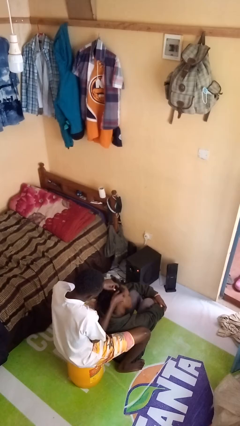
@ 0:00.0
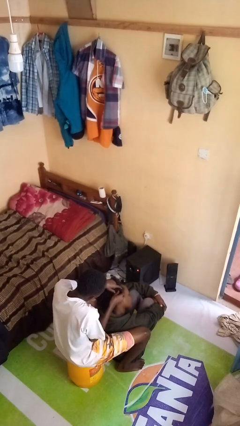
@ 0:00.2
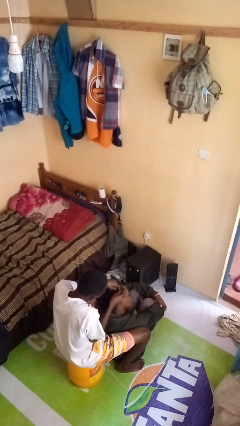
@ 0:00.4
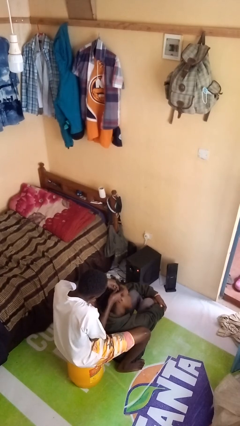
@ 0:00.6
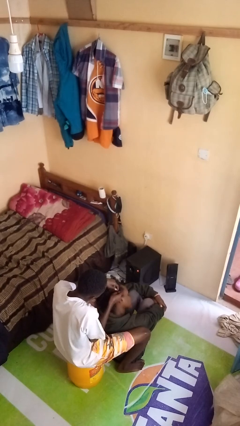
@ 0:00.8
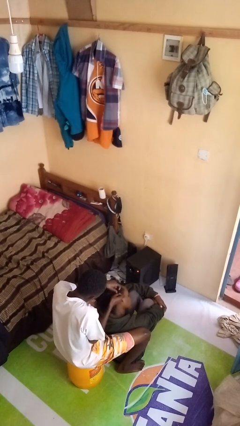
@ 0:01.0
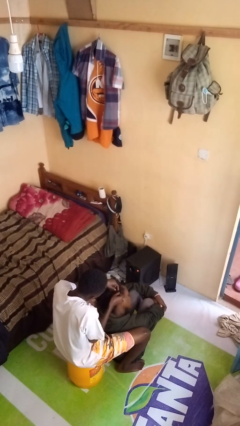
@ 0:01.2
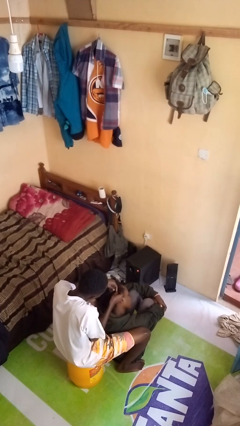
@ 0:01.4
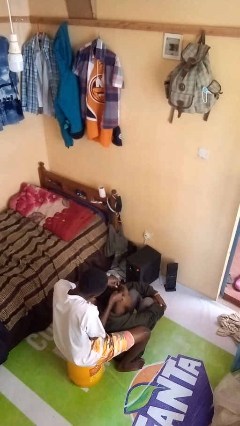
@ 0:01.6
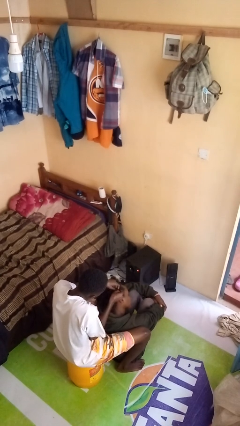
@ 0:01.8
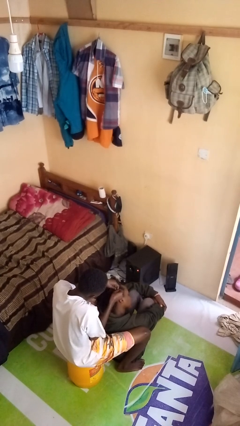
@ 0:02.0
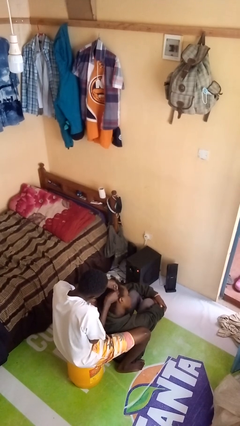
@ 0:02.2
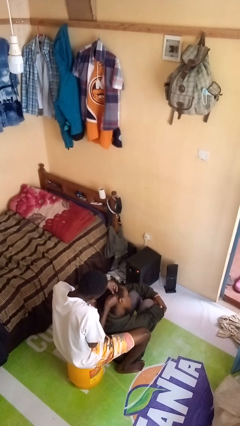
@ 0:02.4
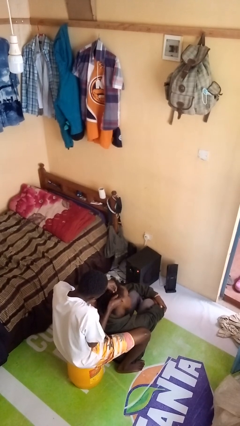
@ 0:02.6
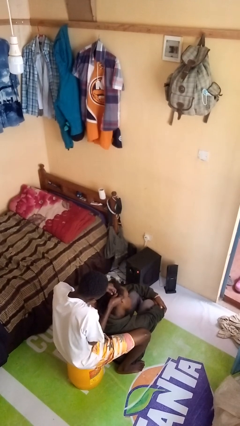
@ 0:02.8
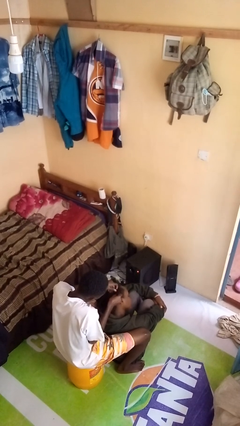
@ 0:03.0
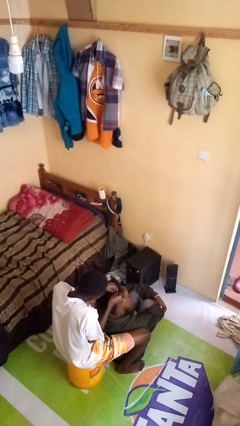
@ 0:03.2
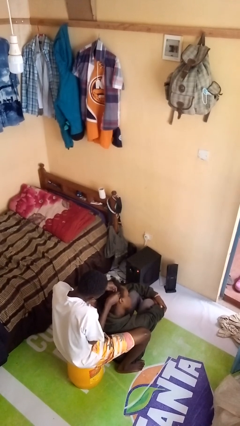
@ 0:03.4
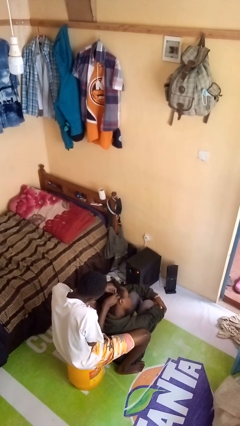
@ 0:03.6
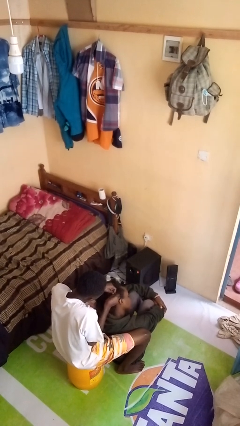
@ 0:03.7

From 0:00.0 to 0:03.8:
person braids hair of person

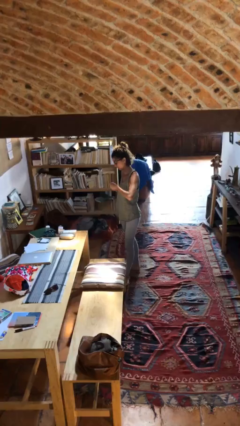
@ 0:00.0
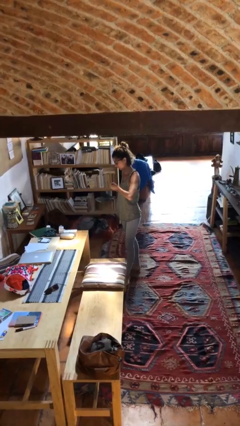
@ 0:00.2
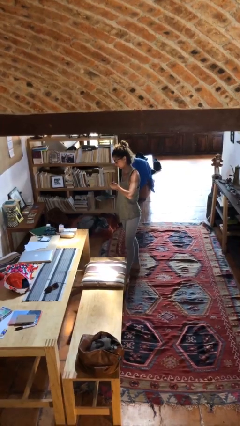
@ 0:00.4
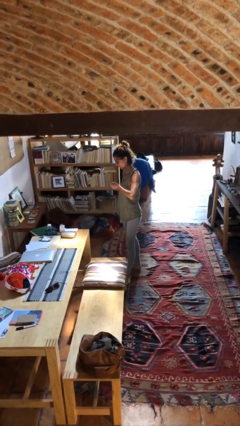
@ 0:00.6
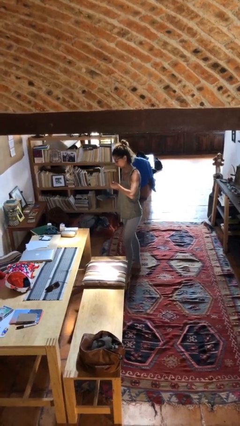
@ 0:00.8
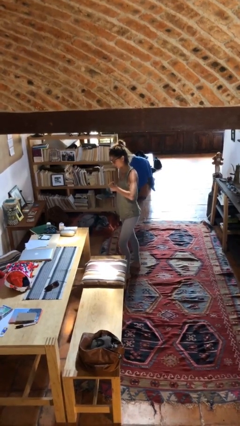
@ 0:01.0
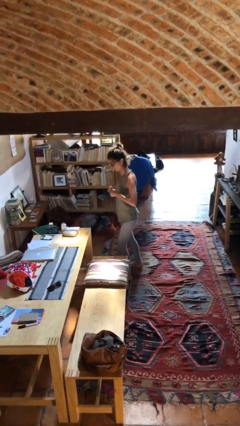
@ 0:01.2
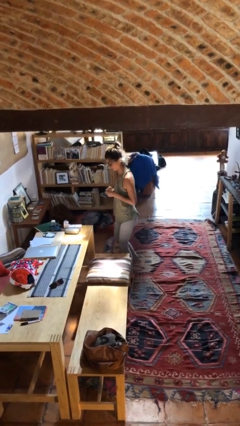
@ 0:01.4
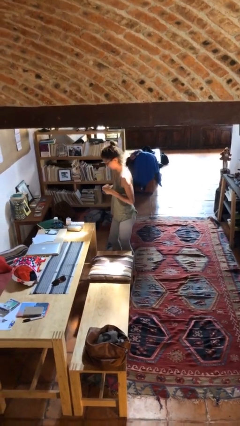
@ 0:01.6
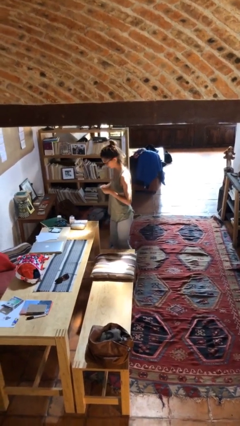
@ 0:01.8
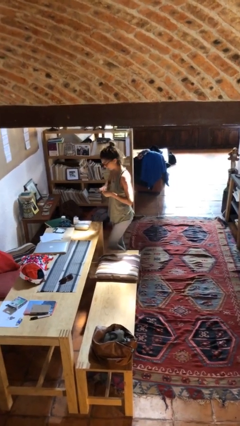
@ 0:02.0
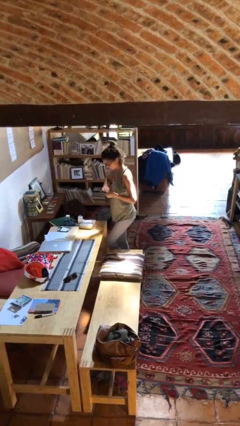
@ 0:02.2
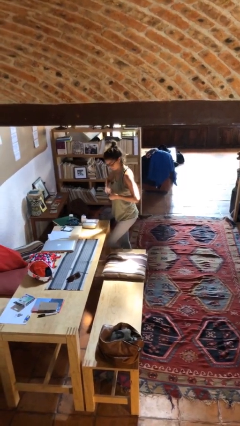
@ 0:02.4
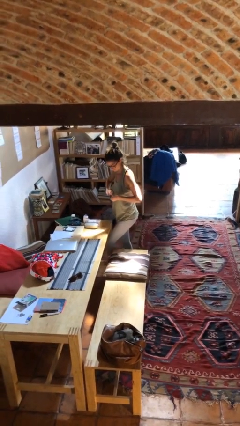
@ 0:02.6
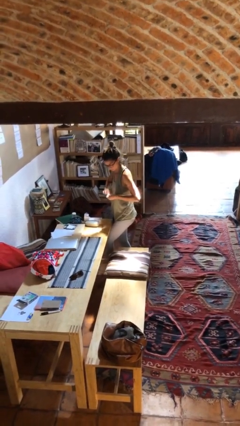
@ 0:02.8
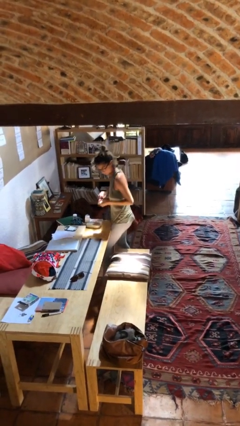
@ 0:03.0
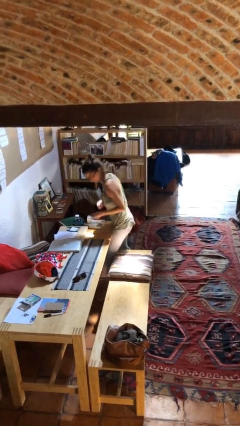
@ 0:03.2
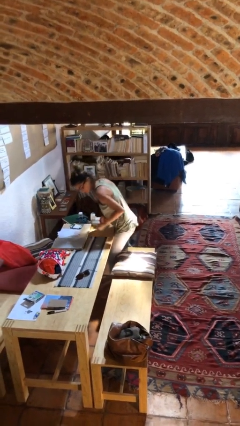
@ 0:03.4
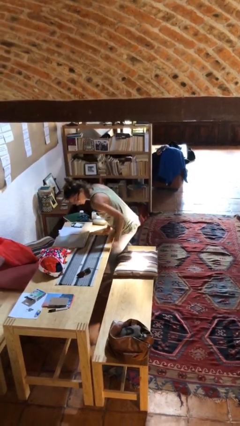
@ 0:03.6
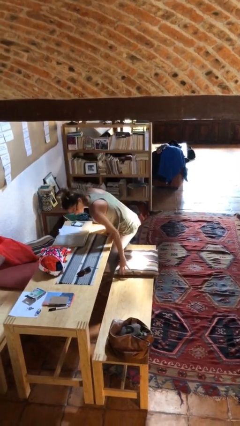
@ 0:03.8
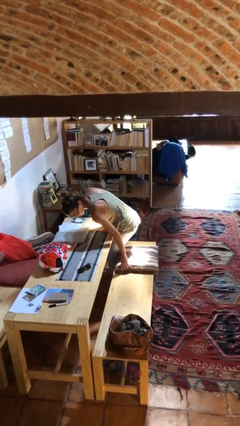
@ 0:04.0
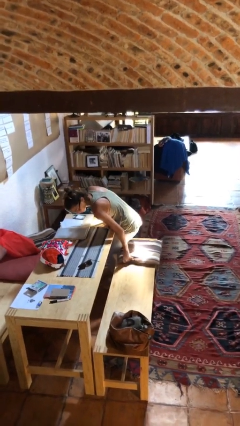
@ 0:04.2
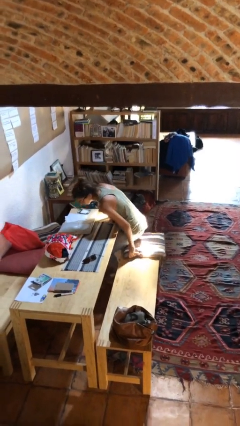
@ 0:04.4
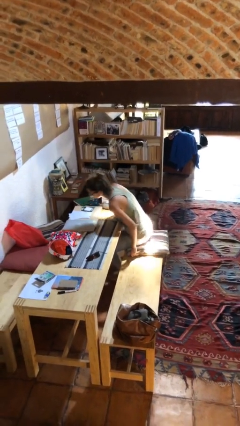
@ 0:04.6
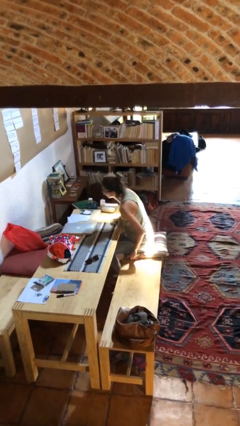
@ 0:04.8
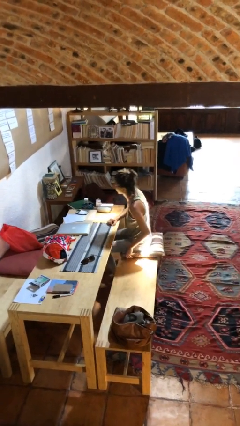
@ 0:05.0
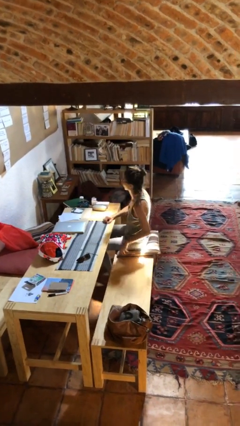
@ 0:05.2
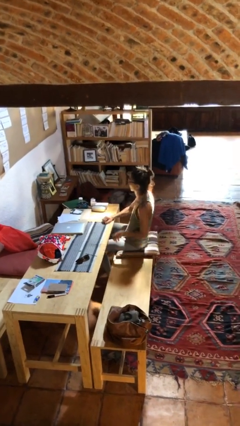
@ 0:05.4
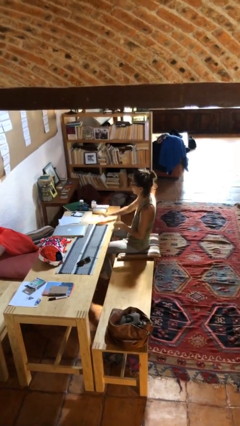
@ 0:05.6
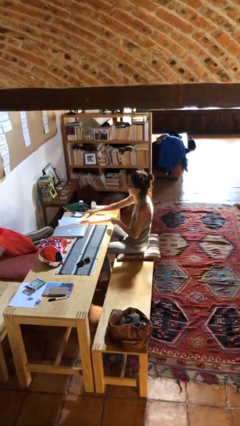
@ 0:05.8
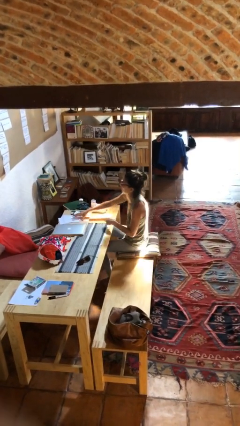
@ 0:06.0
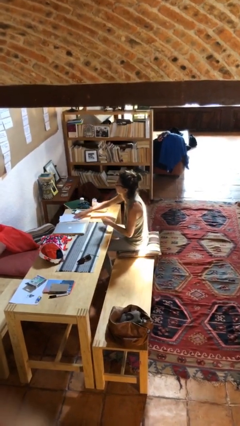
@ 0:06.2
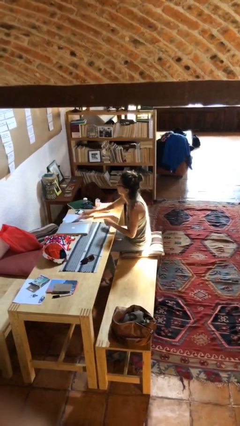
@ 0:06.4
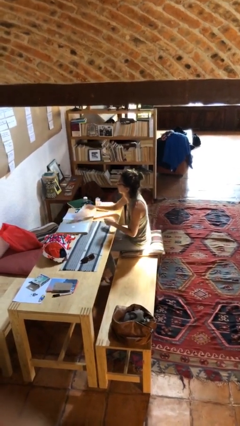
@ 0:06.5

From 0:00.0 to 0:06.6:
person sits down

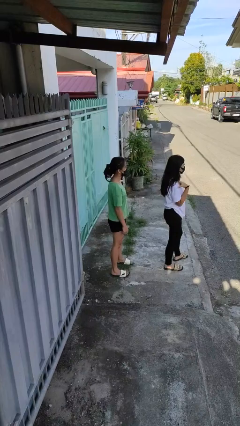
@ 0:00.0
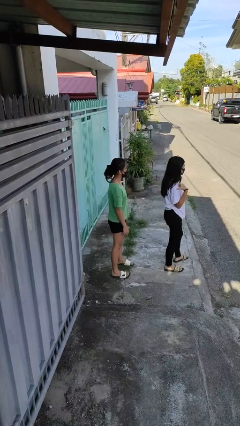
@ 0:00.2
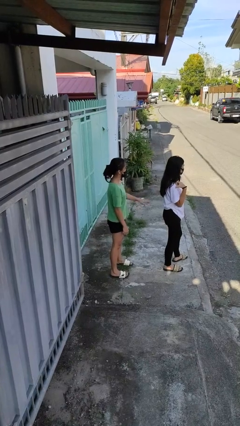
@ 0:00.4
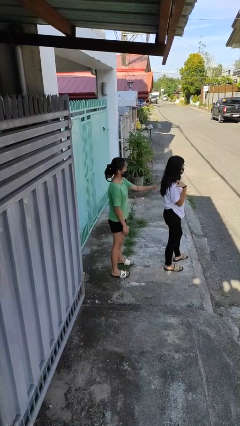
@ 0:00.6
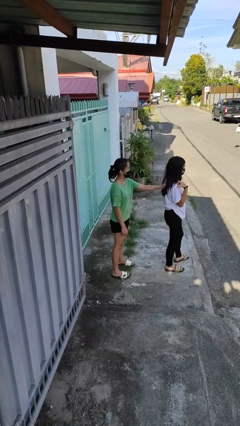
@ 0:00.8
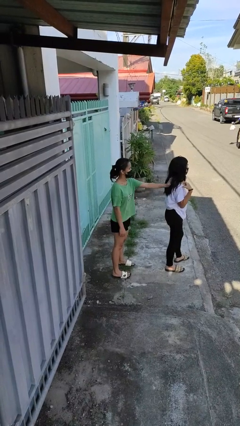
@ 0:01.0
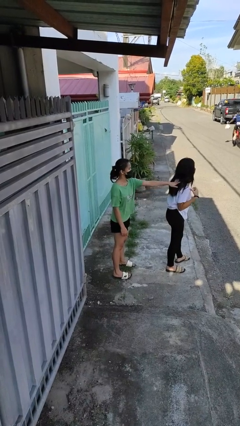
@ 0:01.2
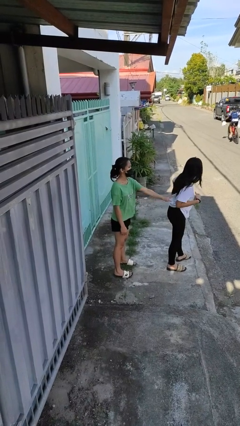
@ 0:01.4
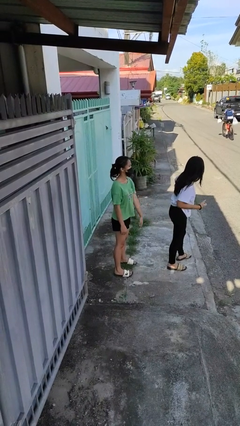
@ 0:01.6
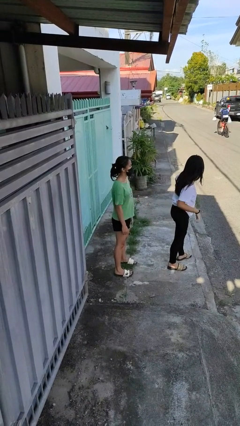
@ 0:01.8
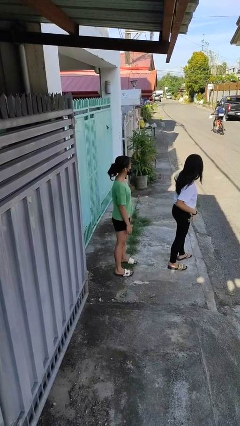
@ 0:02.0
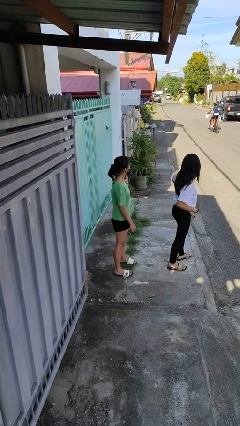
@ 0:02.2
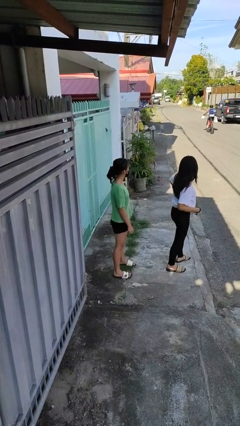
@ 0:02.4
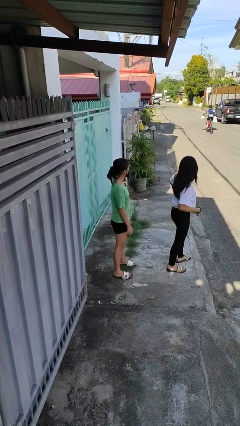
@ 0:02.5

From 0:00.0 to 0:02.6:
person touches back of person

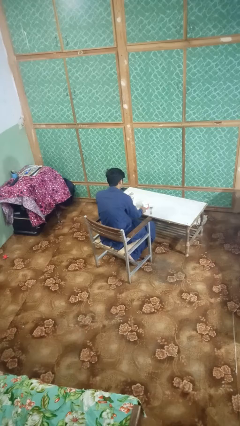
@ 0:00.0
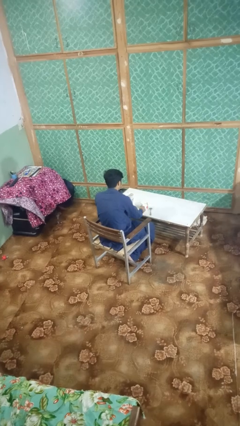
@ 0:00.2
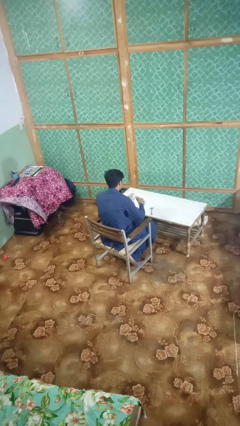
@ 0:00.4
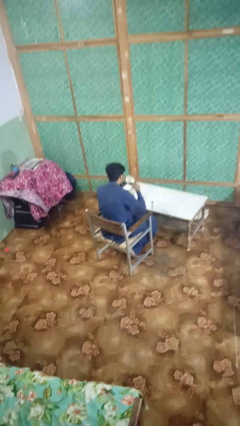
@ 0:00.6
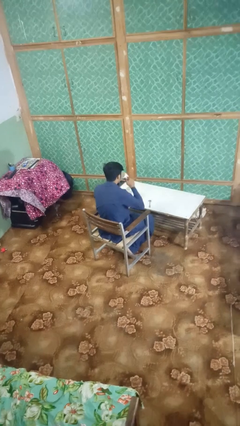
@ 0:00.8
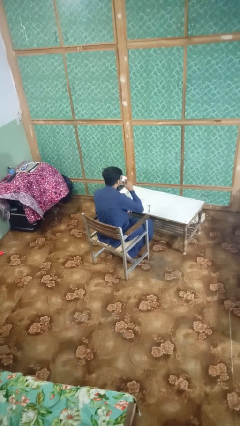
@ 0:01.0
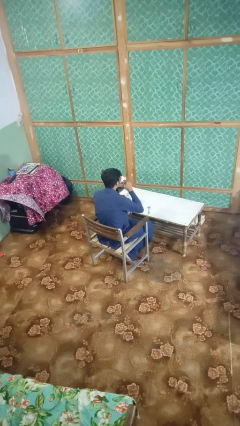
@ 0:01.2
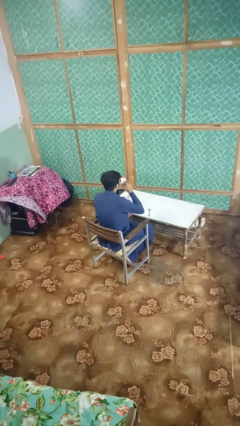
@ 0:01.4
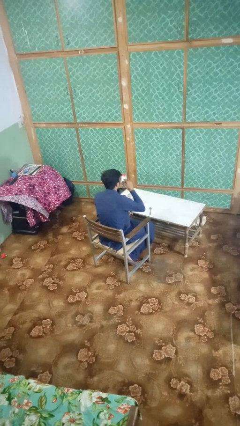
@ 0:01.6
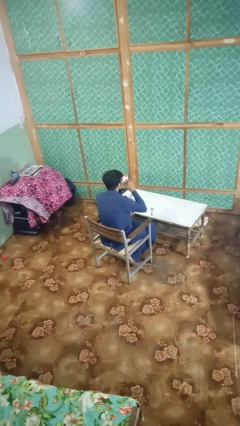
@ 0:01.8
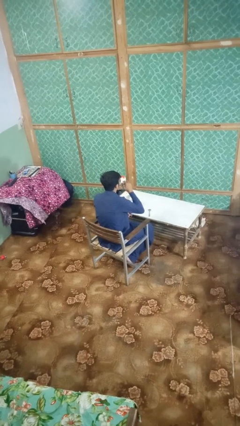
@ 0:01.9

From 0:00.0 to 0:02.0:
person drinks from mug

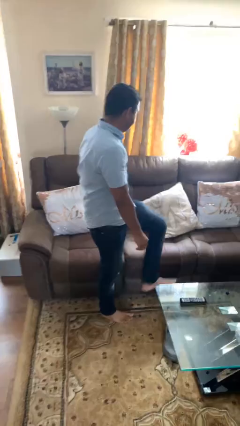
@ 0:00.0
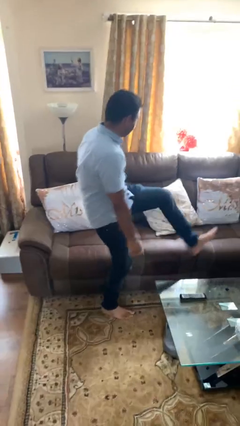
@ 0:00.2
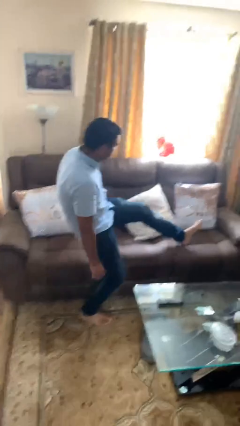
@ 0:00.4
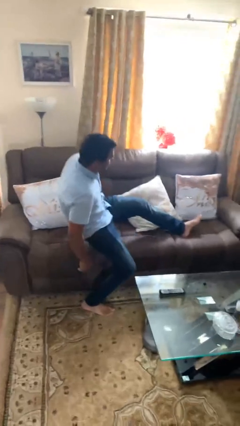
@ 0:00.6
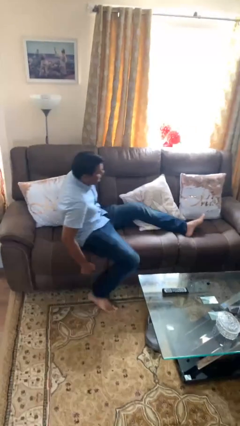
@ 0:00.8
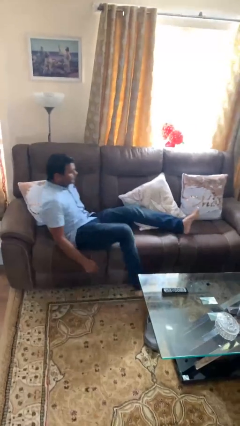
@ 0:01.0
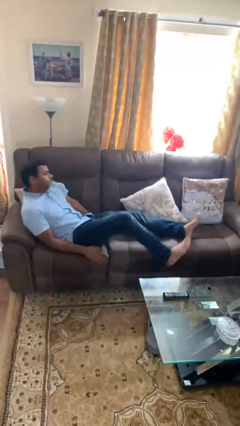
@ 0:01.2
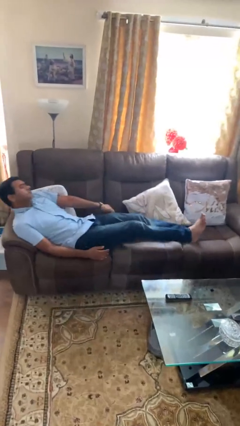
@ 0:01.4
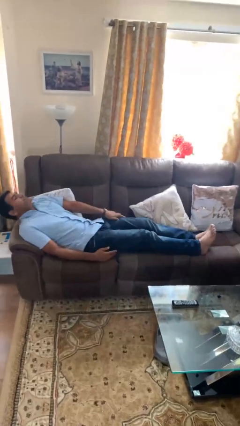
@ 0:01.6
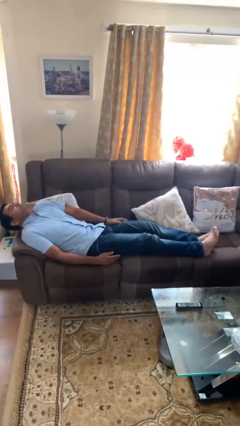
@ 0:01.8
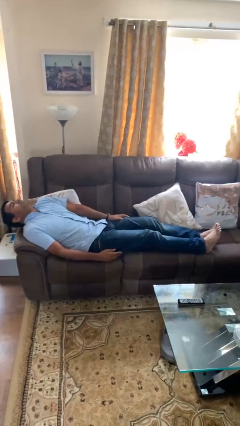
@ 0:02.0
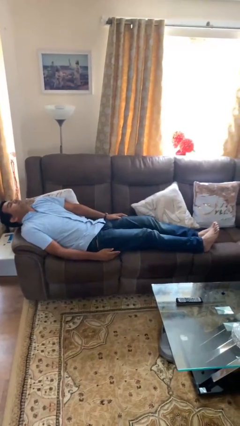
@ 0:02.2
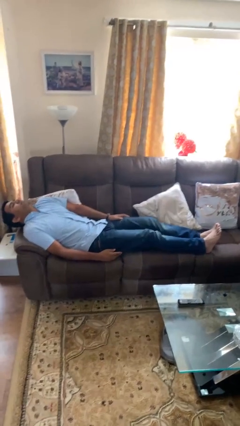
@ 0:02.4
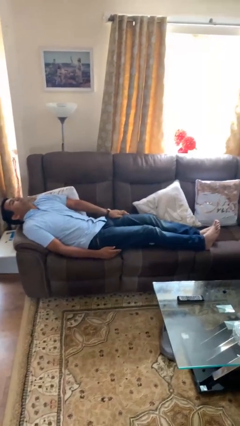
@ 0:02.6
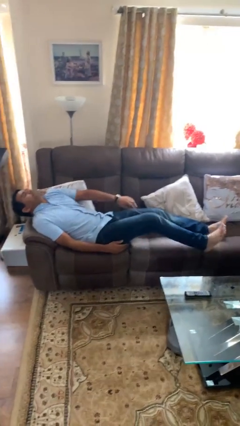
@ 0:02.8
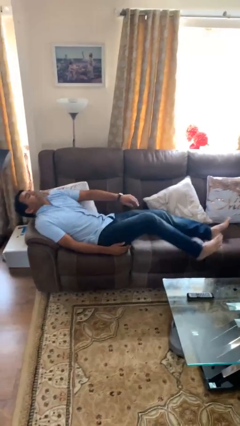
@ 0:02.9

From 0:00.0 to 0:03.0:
person lies down on couch
